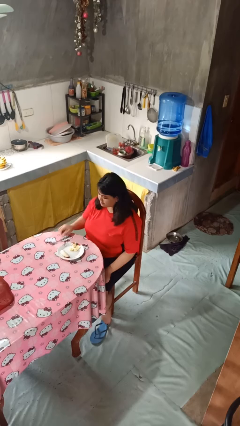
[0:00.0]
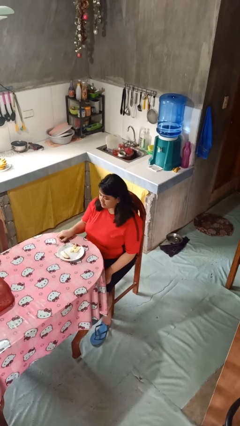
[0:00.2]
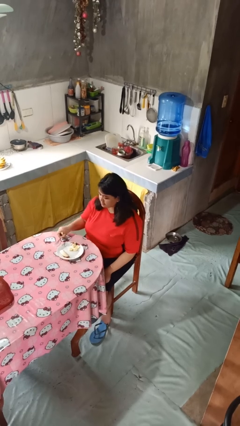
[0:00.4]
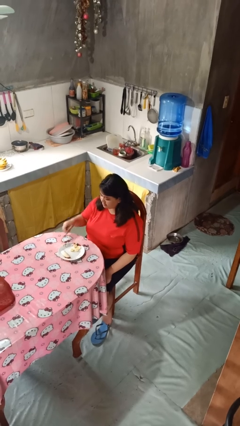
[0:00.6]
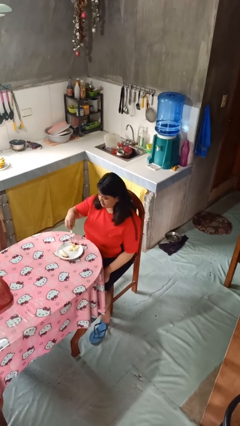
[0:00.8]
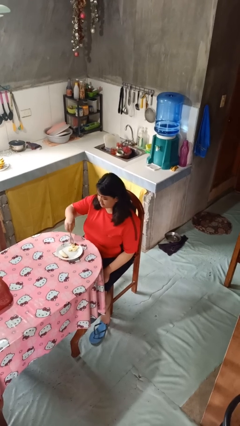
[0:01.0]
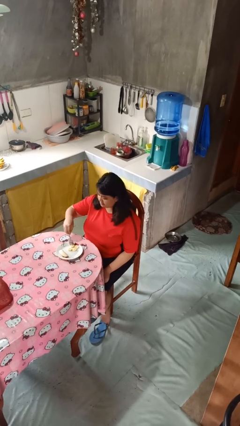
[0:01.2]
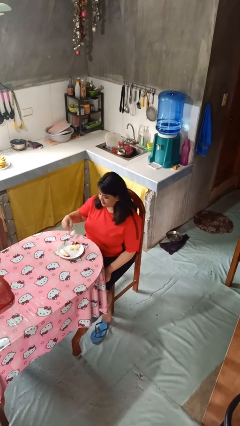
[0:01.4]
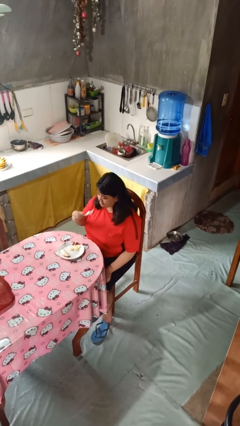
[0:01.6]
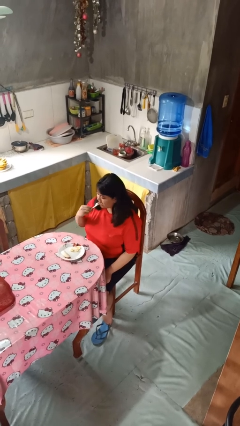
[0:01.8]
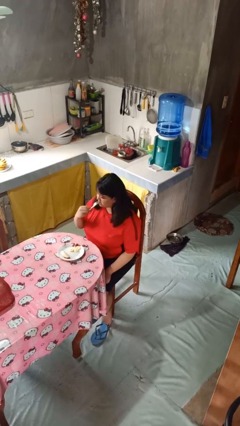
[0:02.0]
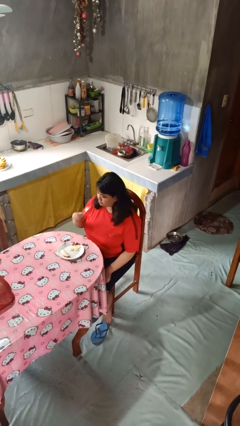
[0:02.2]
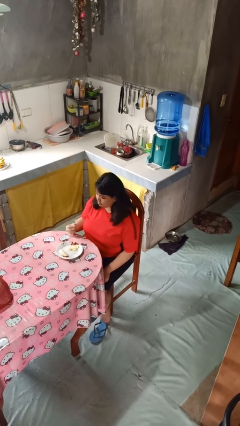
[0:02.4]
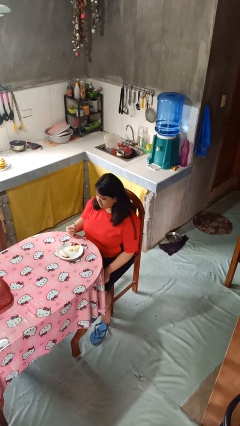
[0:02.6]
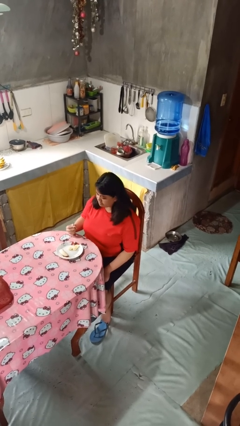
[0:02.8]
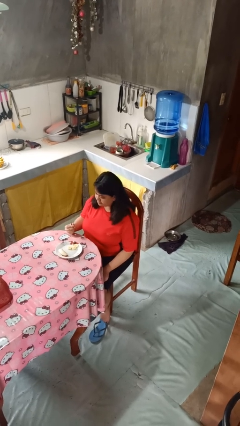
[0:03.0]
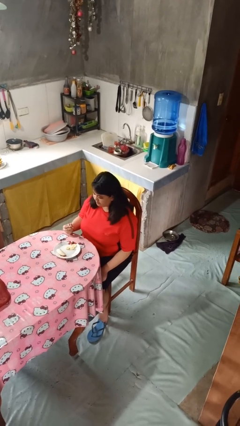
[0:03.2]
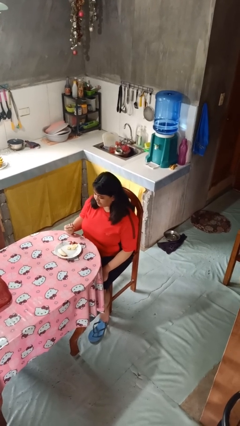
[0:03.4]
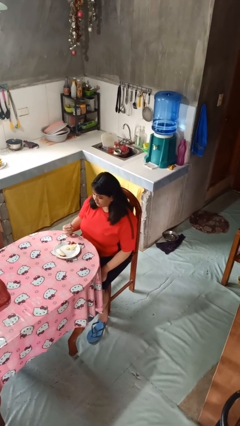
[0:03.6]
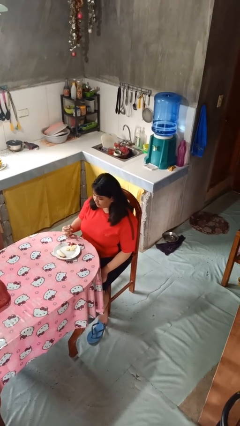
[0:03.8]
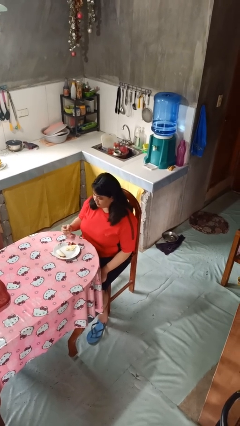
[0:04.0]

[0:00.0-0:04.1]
person eats with utensil

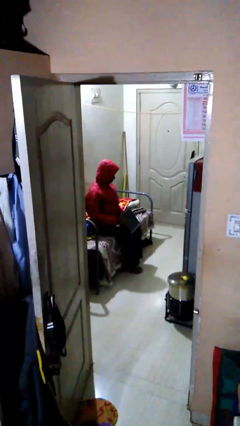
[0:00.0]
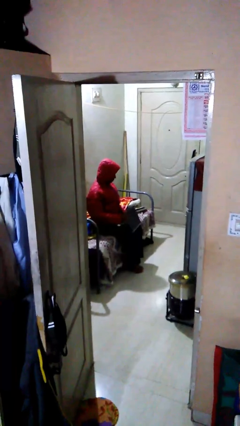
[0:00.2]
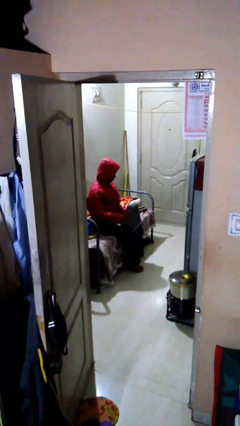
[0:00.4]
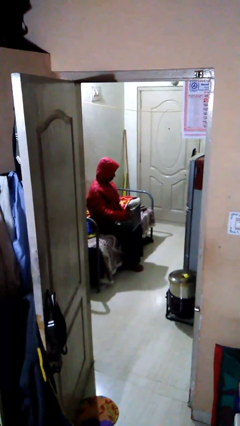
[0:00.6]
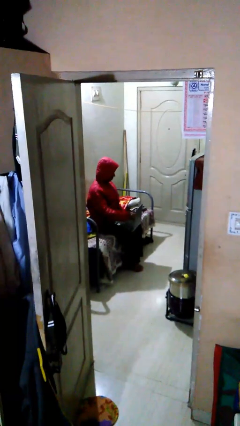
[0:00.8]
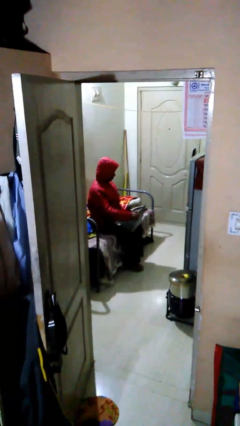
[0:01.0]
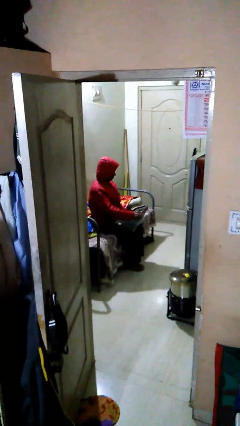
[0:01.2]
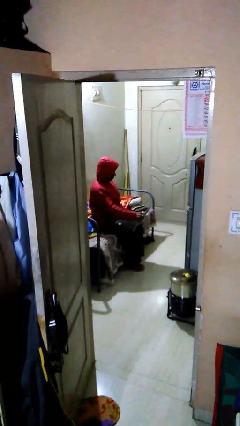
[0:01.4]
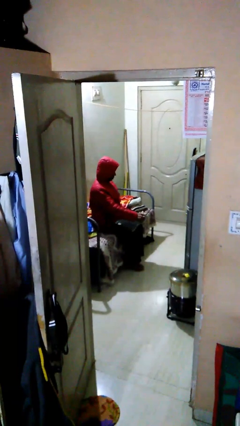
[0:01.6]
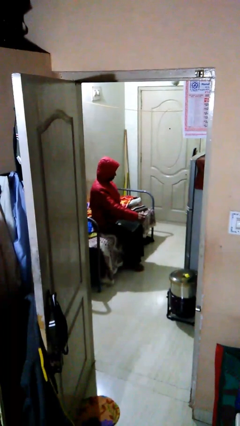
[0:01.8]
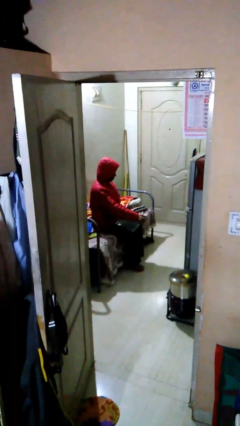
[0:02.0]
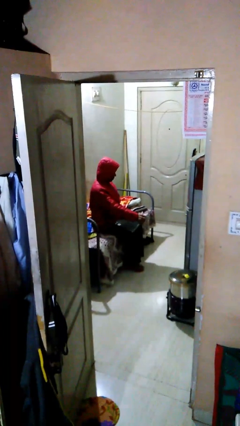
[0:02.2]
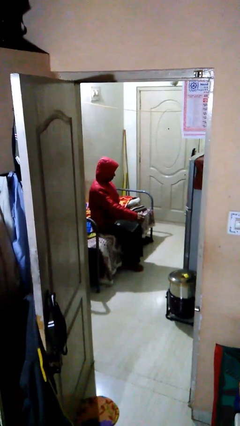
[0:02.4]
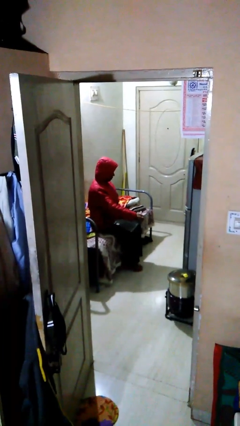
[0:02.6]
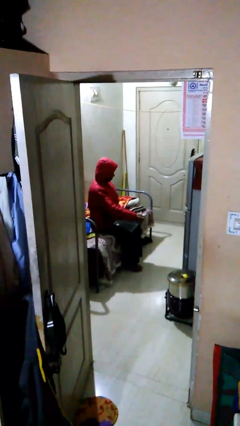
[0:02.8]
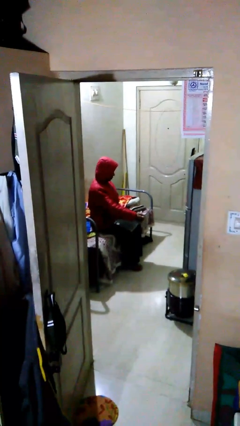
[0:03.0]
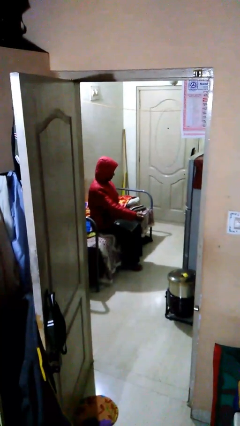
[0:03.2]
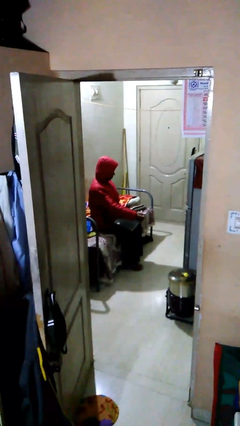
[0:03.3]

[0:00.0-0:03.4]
person interacts with laptop

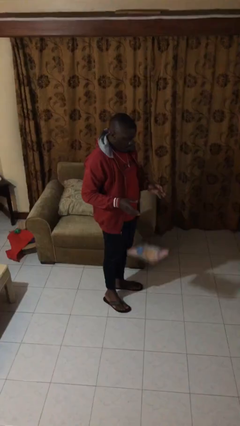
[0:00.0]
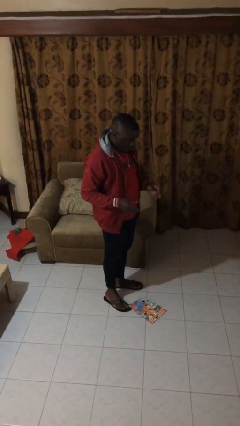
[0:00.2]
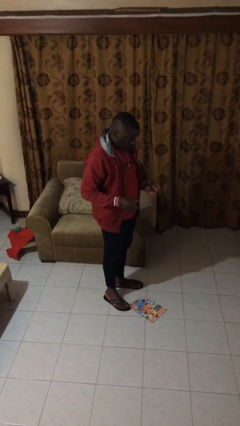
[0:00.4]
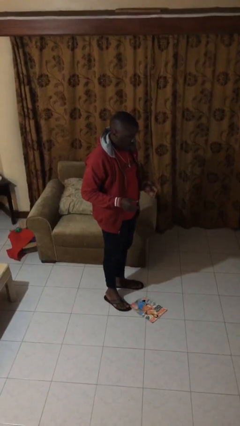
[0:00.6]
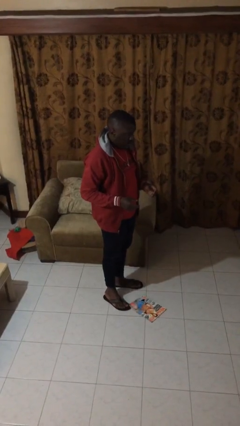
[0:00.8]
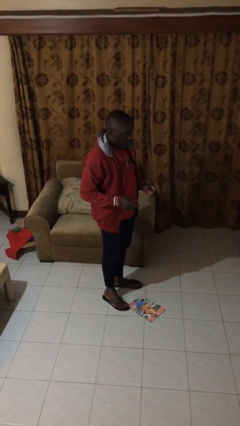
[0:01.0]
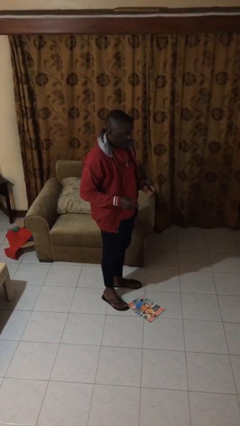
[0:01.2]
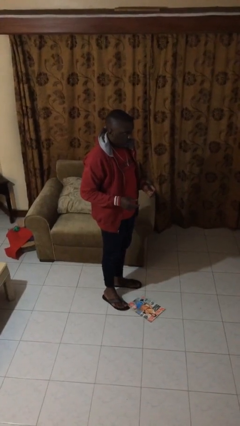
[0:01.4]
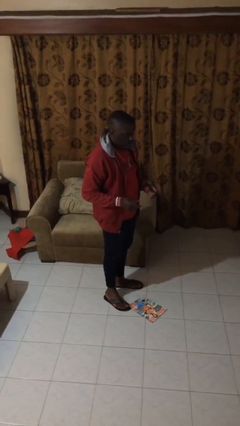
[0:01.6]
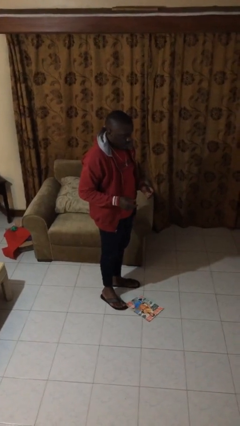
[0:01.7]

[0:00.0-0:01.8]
person drops object

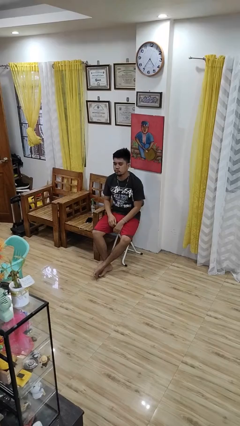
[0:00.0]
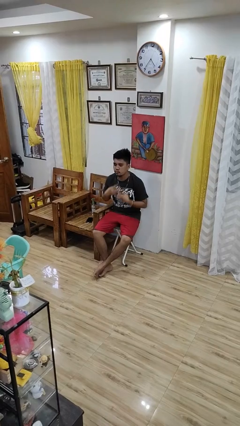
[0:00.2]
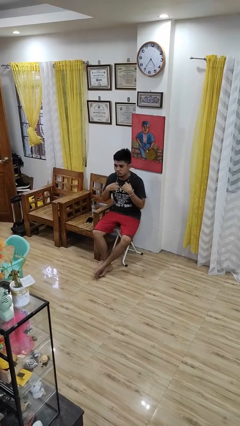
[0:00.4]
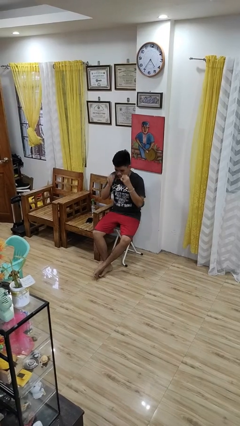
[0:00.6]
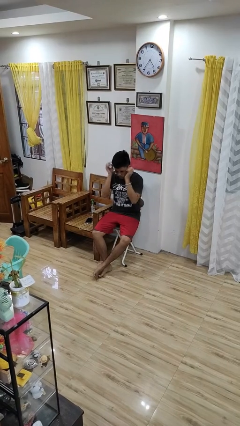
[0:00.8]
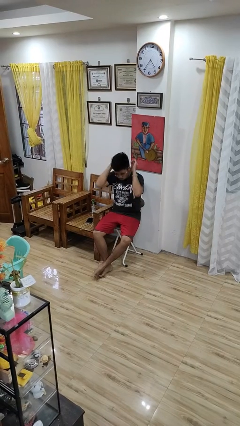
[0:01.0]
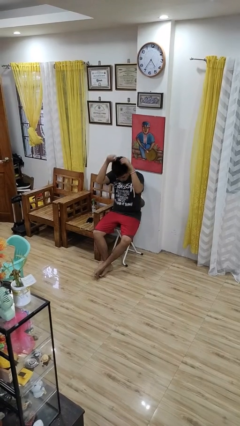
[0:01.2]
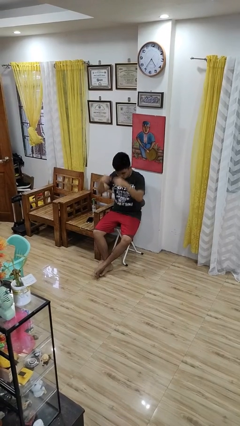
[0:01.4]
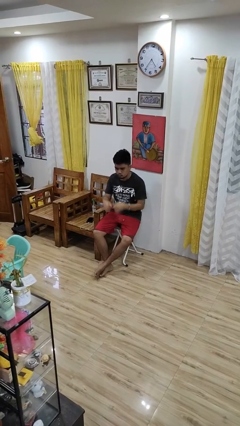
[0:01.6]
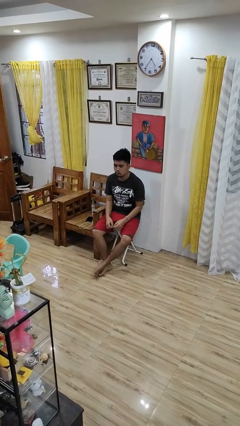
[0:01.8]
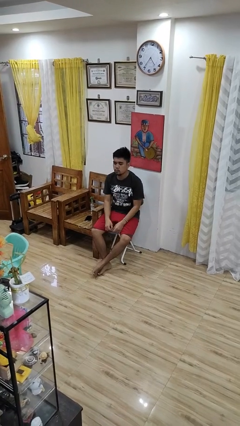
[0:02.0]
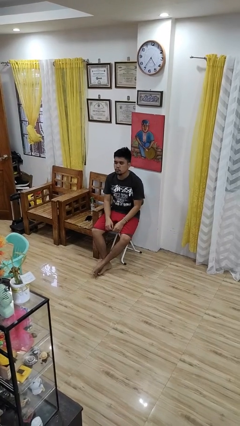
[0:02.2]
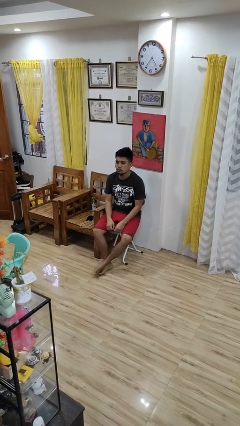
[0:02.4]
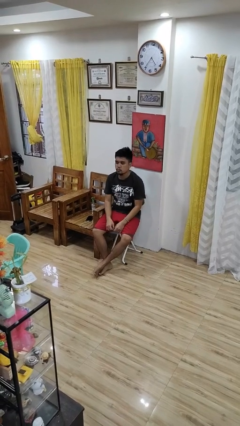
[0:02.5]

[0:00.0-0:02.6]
person takes off necklace

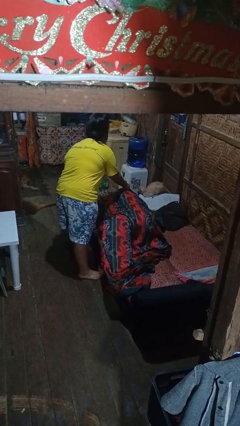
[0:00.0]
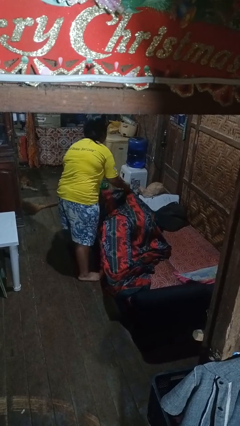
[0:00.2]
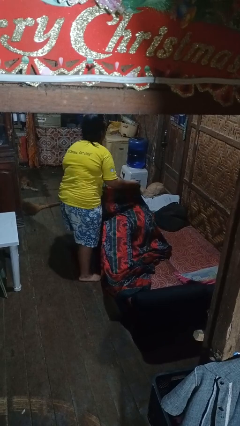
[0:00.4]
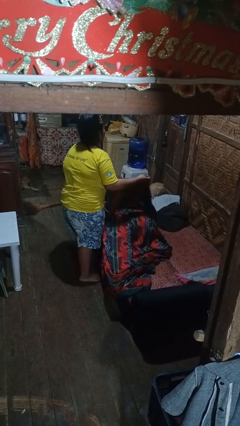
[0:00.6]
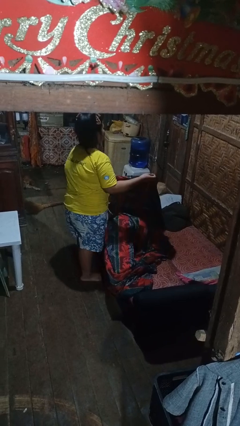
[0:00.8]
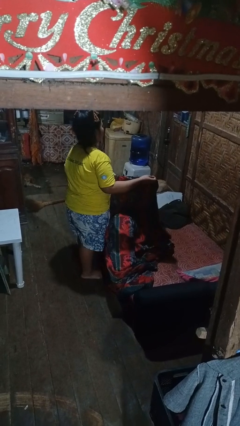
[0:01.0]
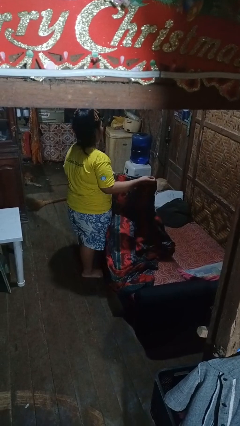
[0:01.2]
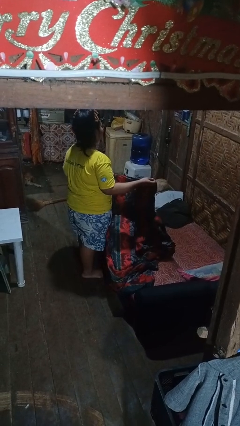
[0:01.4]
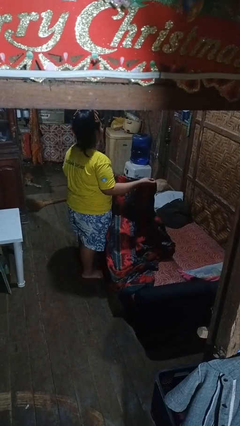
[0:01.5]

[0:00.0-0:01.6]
person uncovers friend with blanket

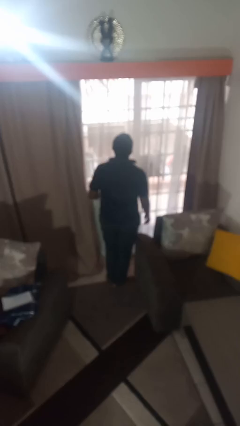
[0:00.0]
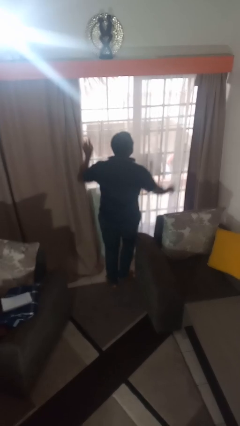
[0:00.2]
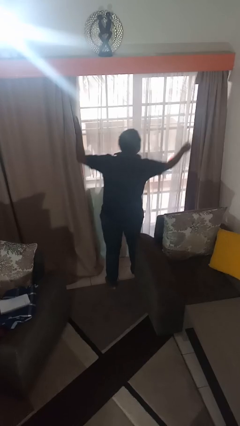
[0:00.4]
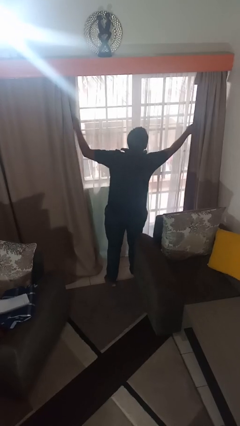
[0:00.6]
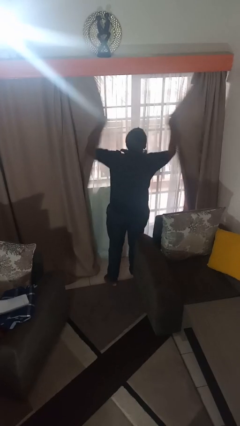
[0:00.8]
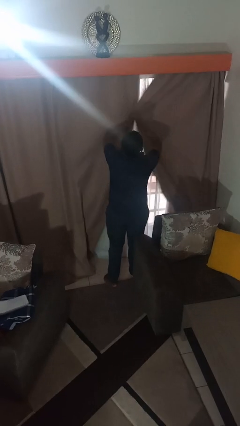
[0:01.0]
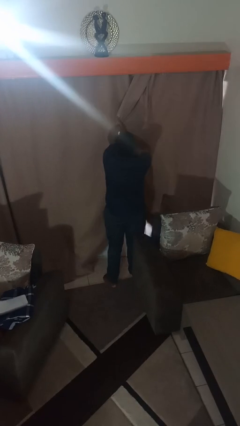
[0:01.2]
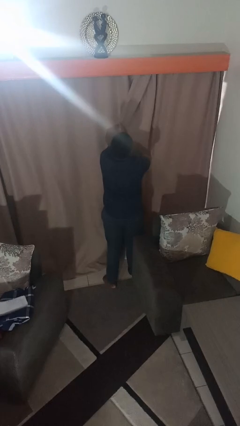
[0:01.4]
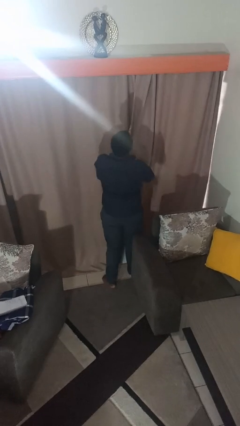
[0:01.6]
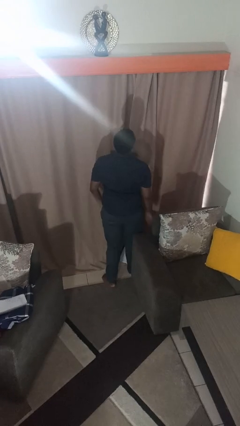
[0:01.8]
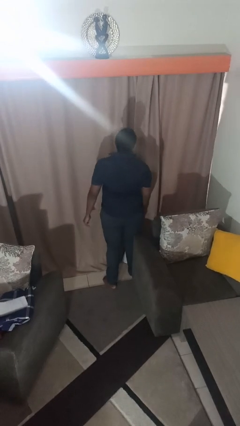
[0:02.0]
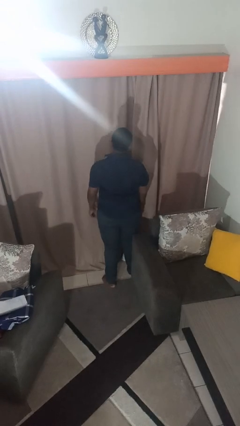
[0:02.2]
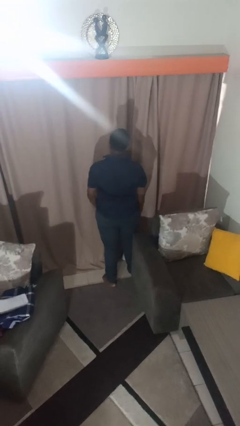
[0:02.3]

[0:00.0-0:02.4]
person closes curtains

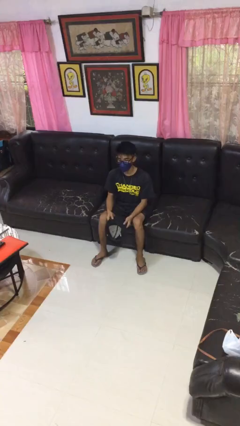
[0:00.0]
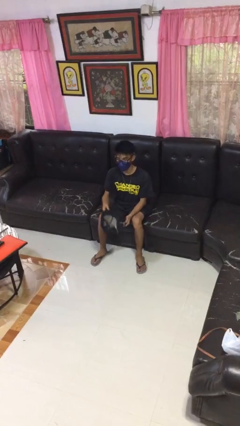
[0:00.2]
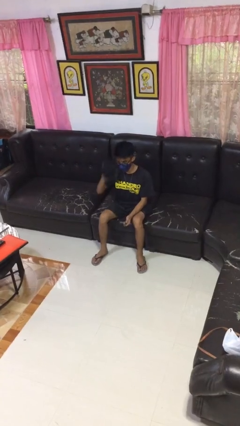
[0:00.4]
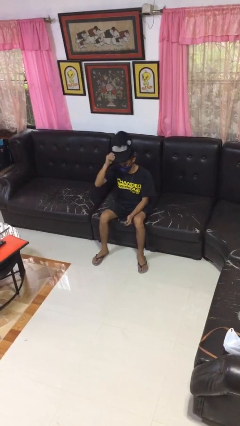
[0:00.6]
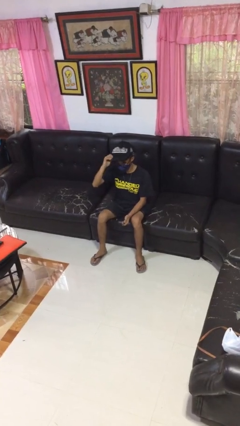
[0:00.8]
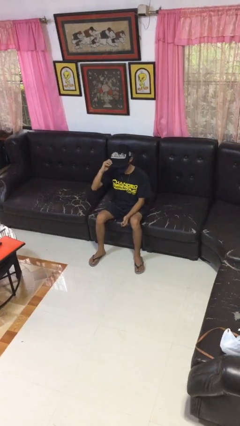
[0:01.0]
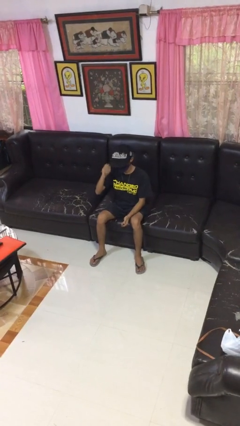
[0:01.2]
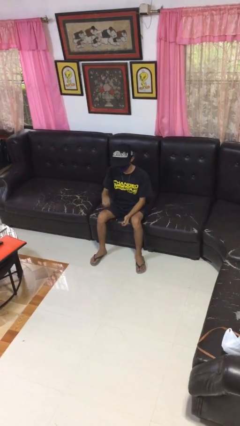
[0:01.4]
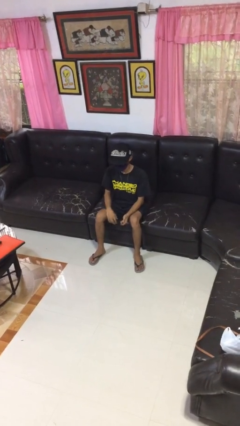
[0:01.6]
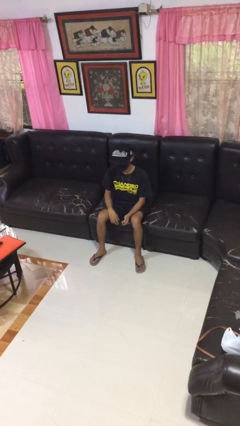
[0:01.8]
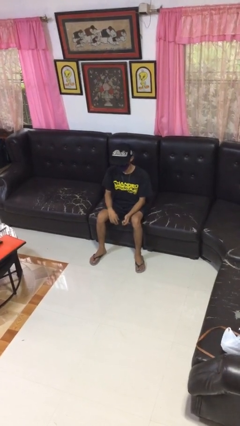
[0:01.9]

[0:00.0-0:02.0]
person puts on hat
